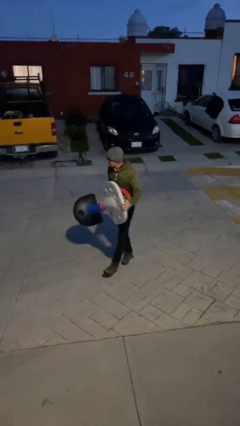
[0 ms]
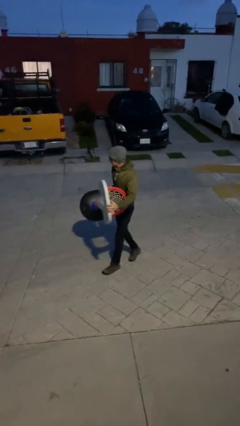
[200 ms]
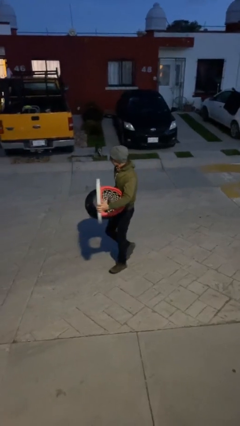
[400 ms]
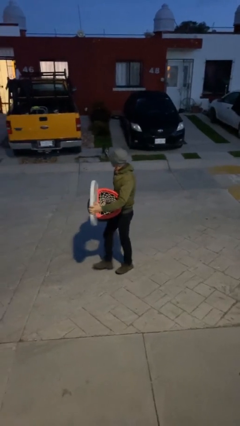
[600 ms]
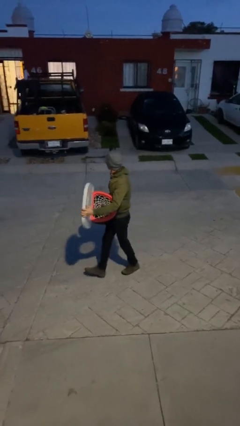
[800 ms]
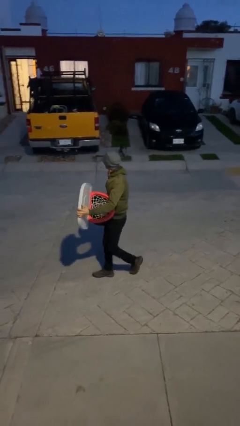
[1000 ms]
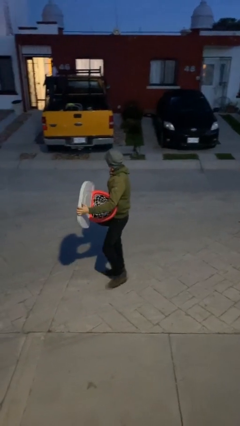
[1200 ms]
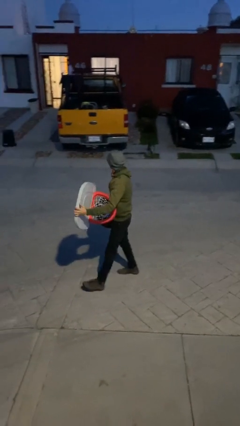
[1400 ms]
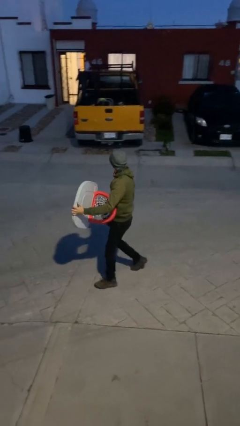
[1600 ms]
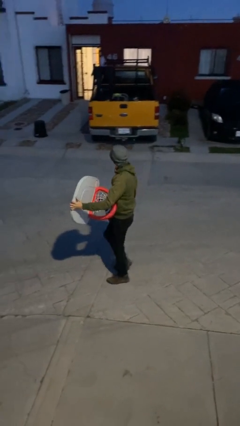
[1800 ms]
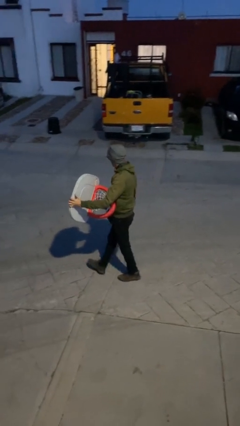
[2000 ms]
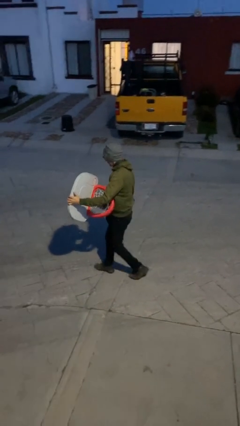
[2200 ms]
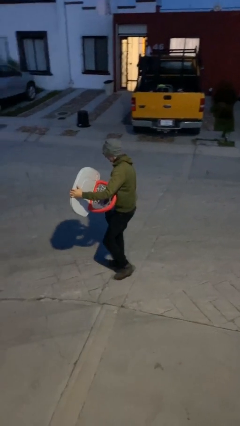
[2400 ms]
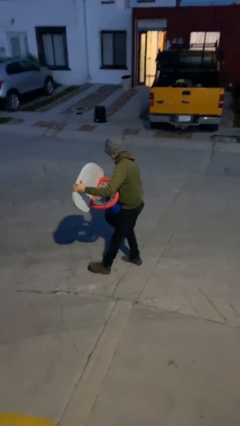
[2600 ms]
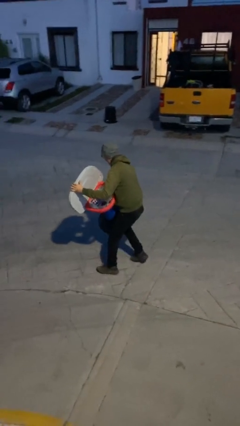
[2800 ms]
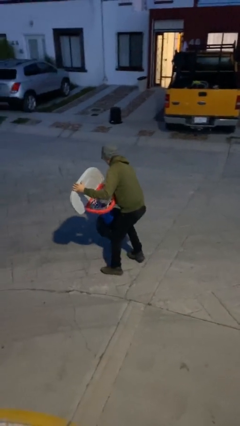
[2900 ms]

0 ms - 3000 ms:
person carries heavy object

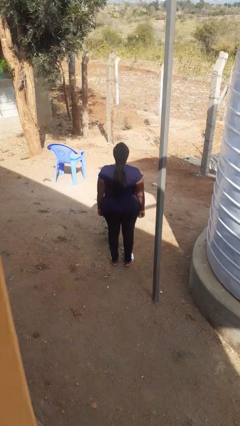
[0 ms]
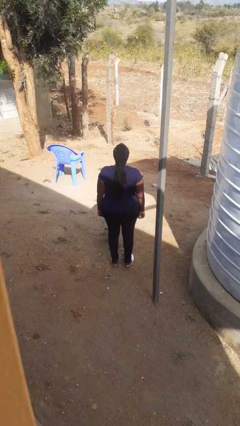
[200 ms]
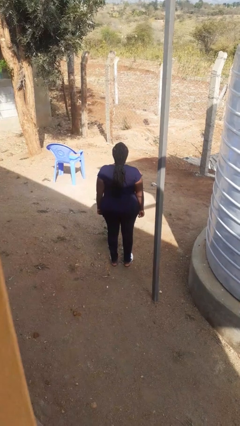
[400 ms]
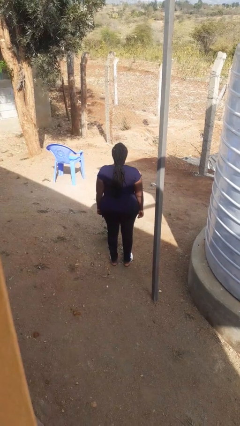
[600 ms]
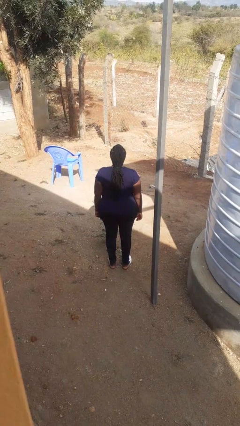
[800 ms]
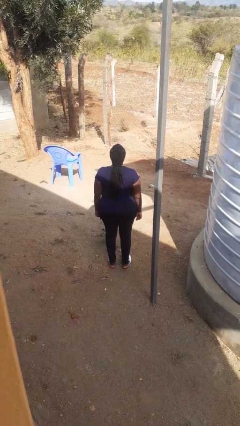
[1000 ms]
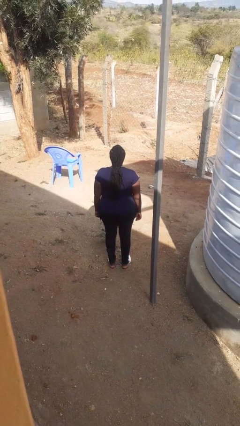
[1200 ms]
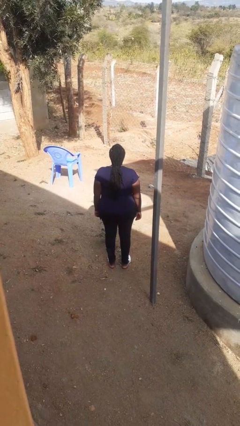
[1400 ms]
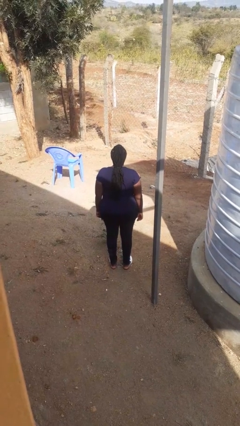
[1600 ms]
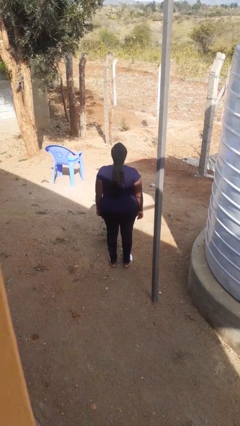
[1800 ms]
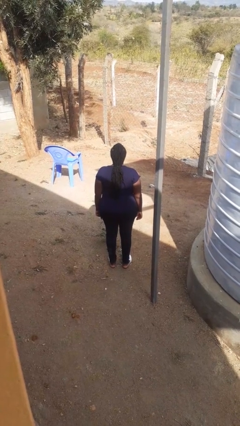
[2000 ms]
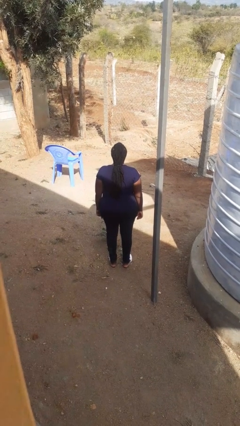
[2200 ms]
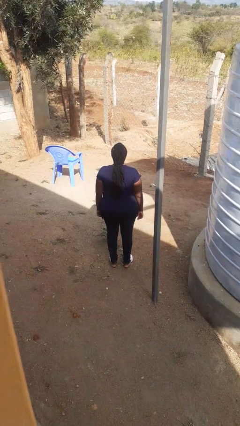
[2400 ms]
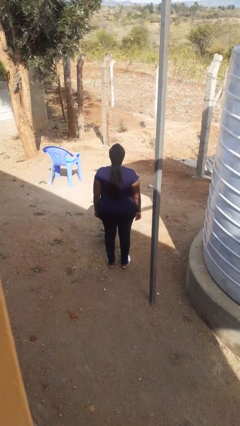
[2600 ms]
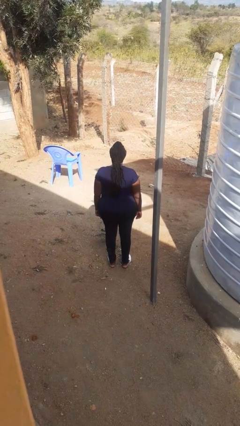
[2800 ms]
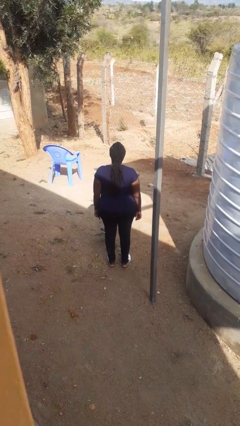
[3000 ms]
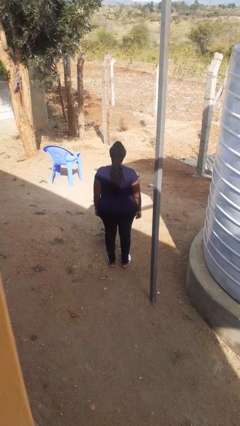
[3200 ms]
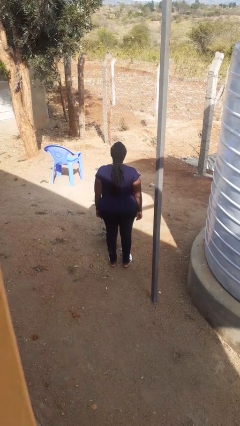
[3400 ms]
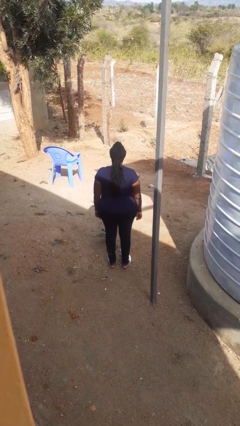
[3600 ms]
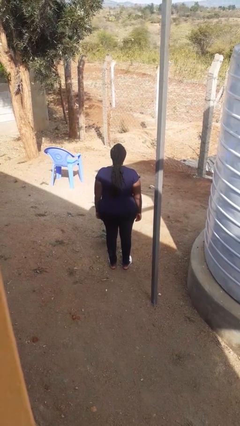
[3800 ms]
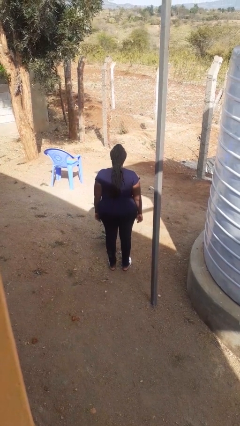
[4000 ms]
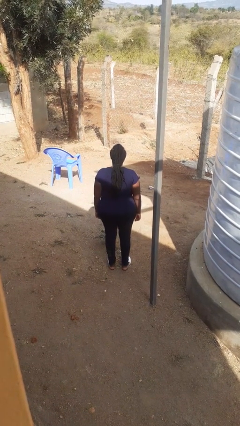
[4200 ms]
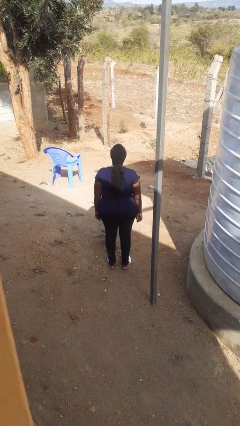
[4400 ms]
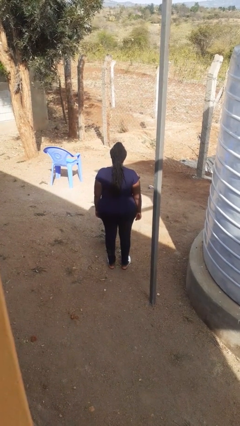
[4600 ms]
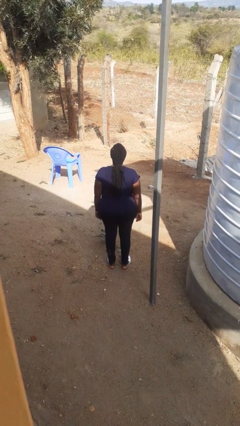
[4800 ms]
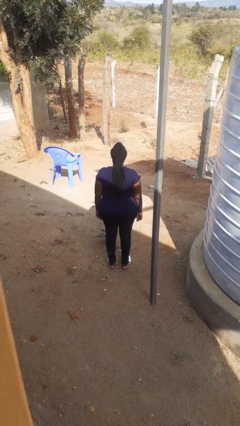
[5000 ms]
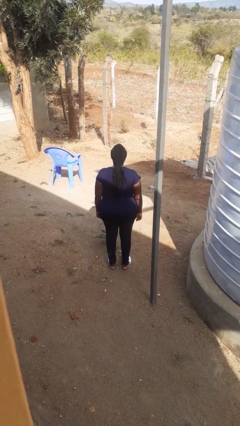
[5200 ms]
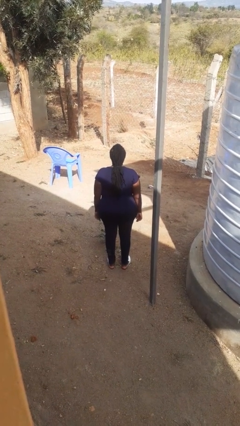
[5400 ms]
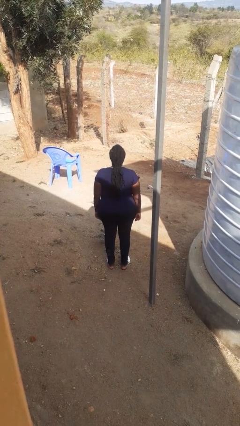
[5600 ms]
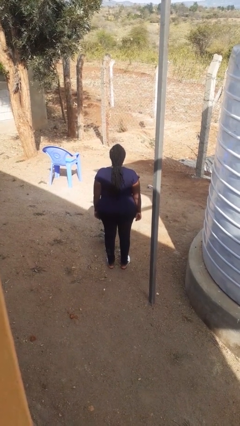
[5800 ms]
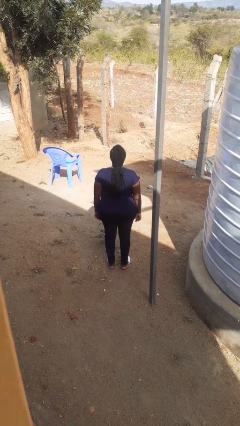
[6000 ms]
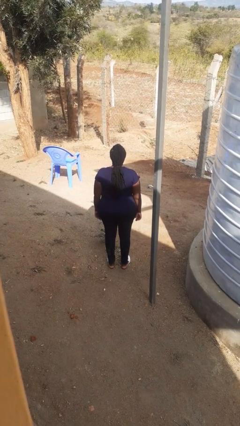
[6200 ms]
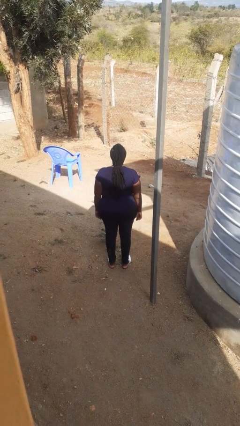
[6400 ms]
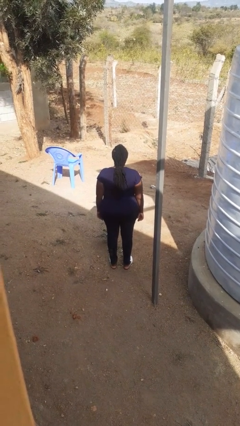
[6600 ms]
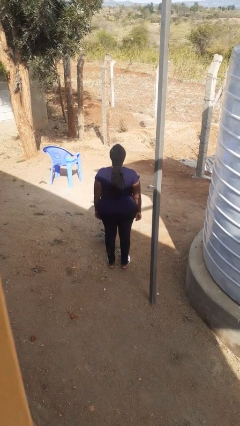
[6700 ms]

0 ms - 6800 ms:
person nods head

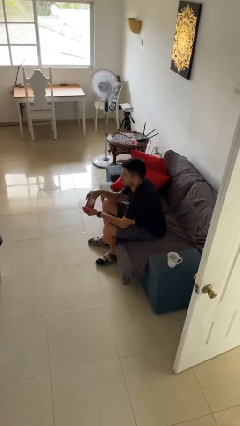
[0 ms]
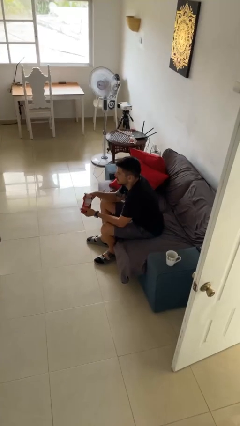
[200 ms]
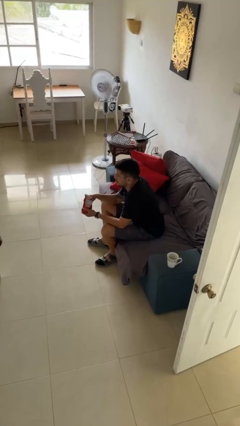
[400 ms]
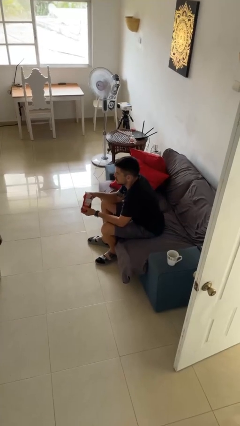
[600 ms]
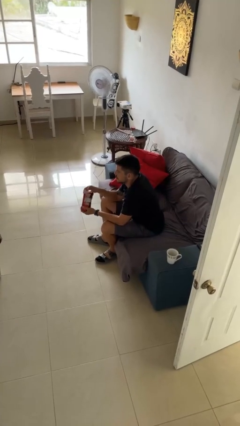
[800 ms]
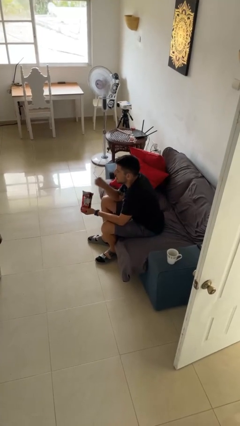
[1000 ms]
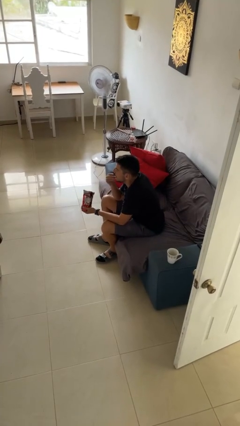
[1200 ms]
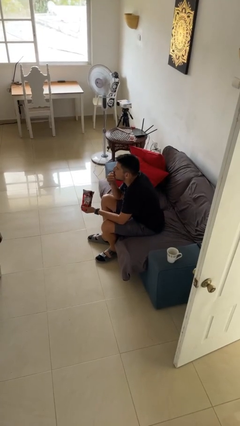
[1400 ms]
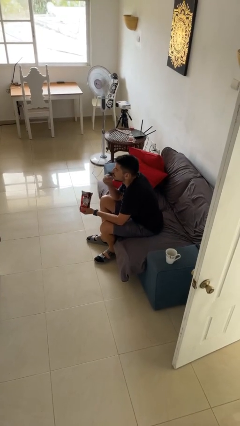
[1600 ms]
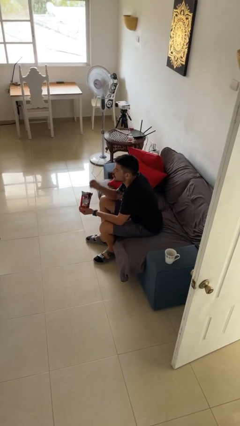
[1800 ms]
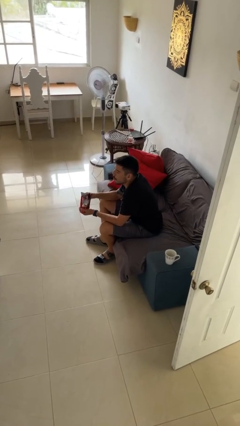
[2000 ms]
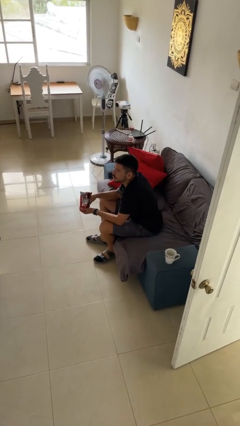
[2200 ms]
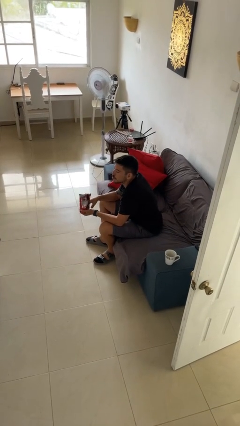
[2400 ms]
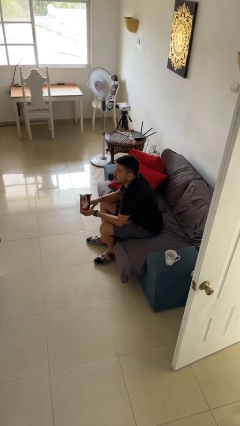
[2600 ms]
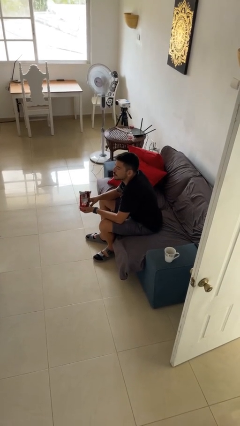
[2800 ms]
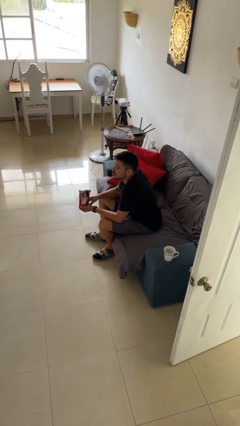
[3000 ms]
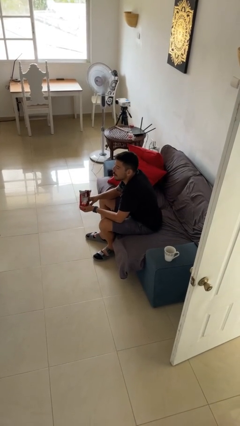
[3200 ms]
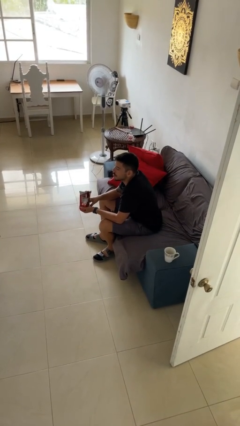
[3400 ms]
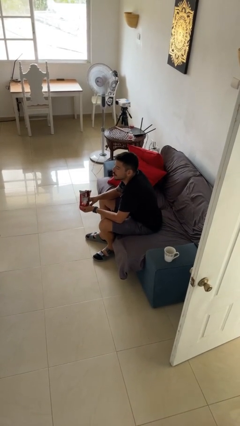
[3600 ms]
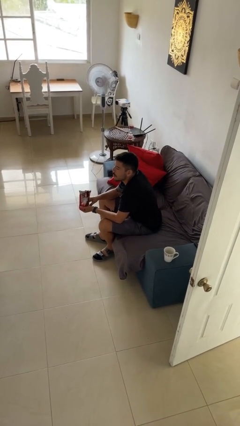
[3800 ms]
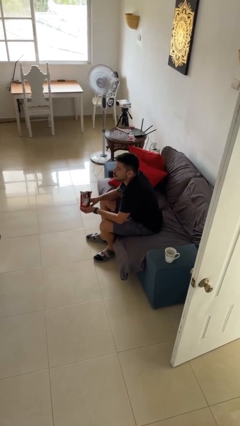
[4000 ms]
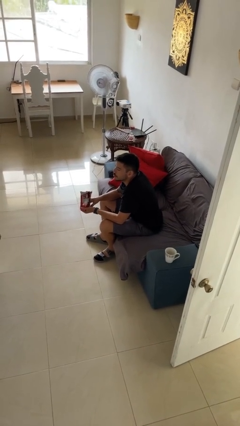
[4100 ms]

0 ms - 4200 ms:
person eats snack from bag

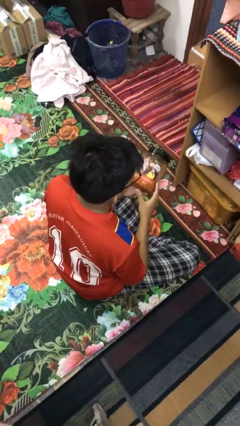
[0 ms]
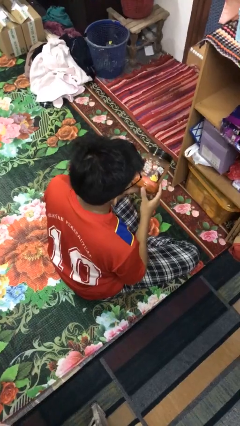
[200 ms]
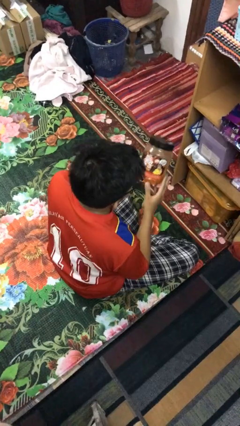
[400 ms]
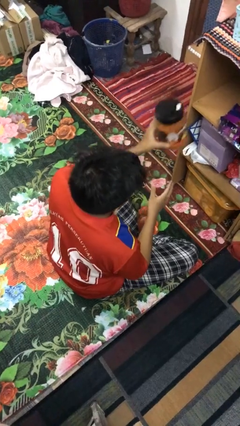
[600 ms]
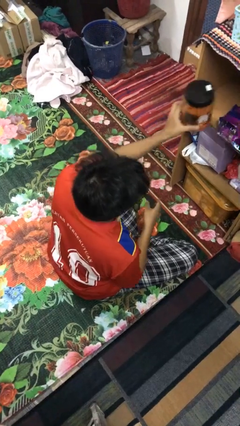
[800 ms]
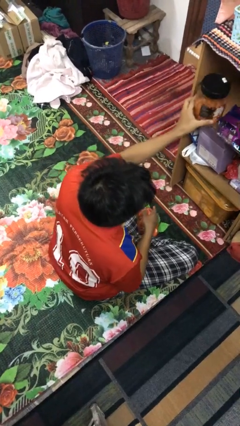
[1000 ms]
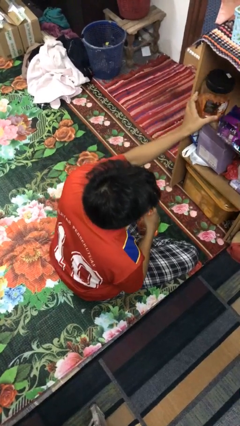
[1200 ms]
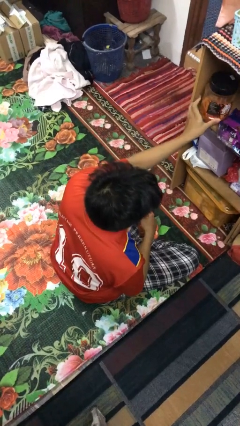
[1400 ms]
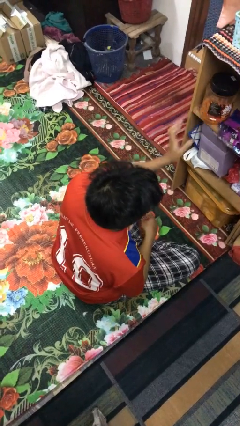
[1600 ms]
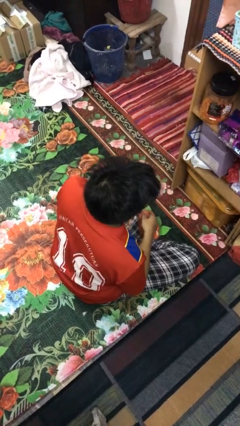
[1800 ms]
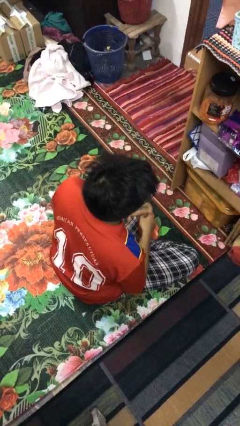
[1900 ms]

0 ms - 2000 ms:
person puts down object into cabinet

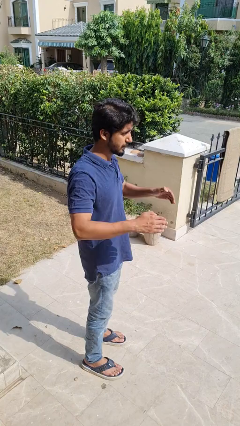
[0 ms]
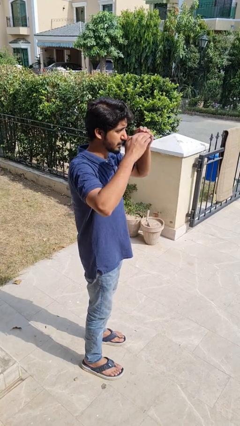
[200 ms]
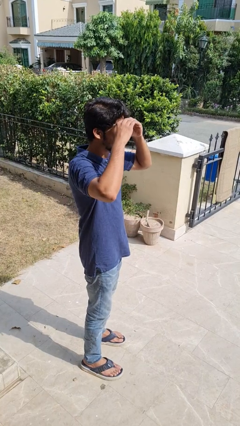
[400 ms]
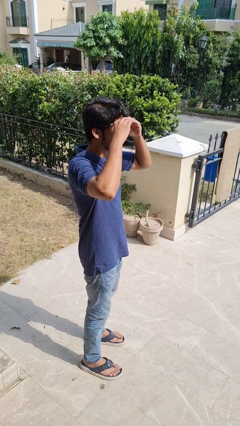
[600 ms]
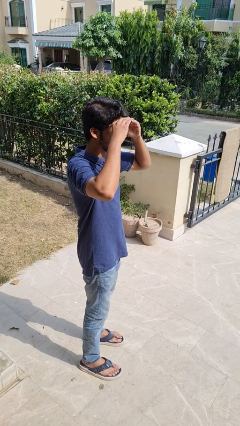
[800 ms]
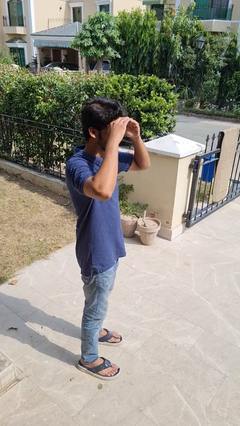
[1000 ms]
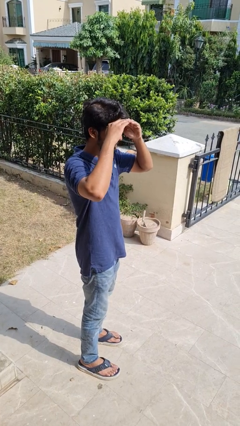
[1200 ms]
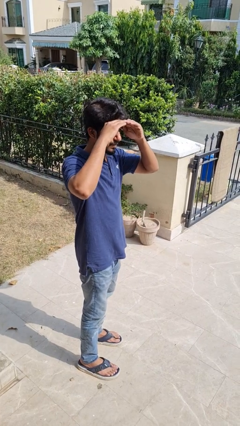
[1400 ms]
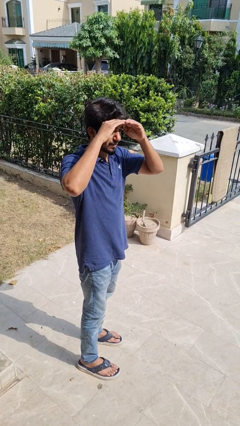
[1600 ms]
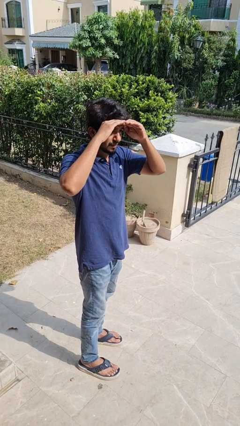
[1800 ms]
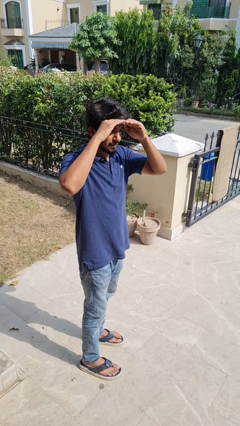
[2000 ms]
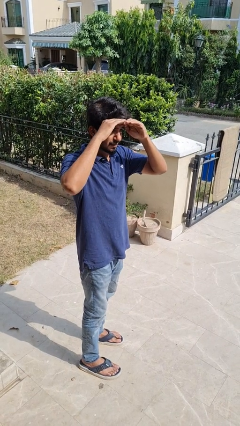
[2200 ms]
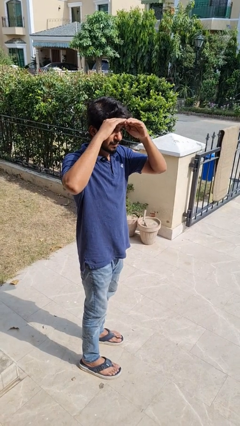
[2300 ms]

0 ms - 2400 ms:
person shades eyes
